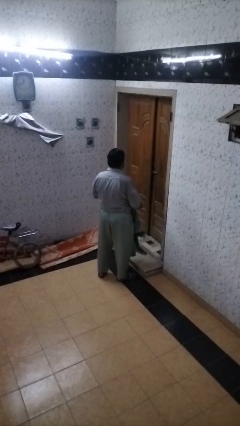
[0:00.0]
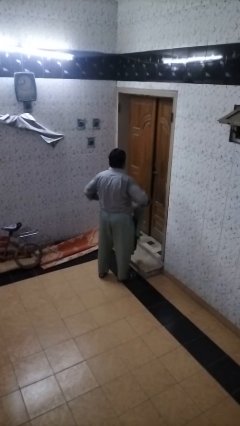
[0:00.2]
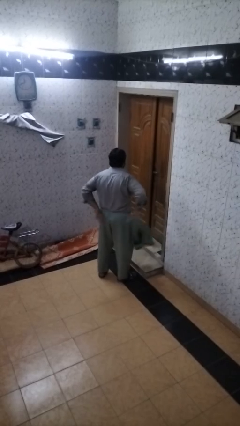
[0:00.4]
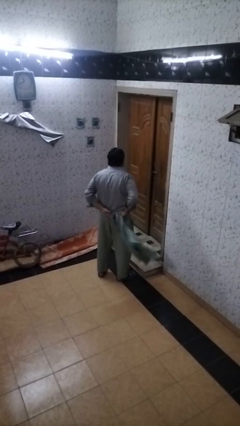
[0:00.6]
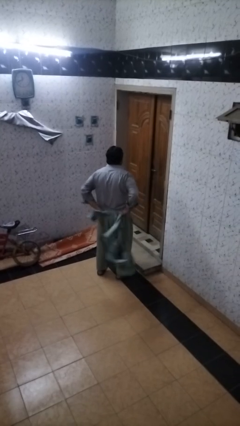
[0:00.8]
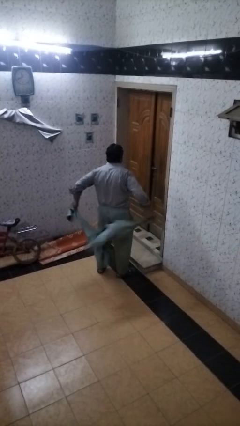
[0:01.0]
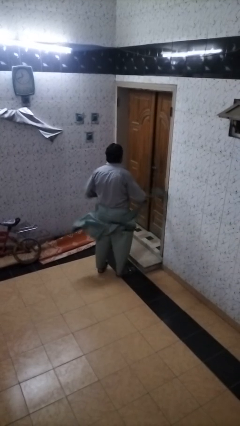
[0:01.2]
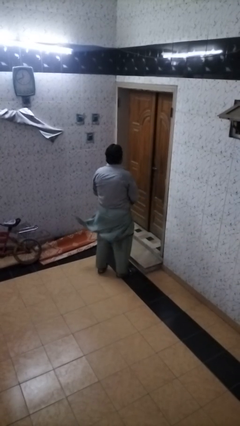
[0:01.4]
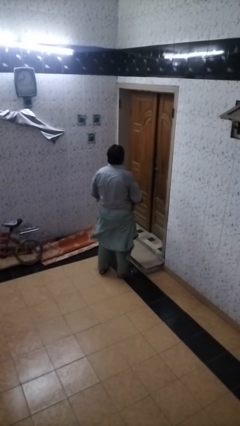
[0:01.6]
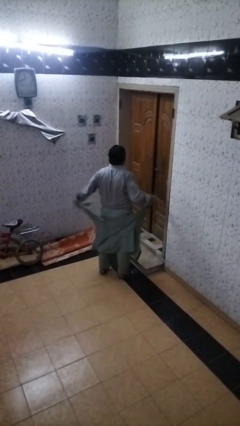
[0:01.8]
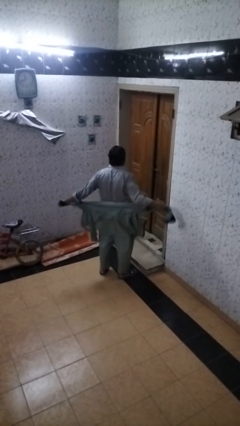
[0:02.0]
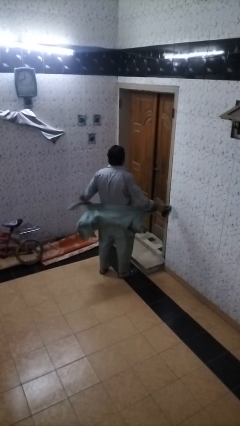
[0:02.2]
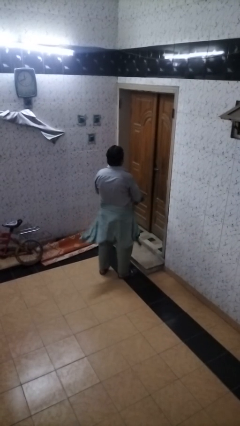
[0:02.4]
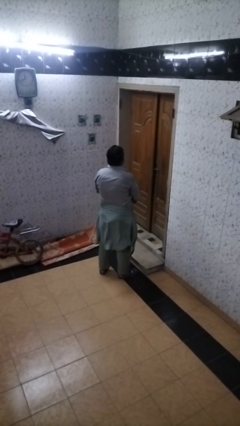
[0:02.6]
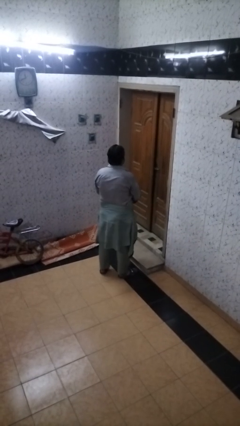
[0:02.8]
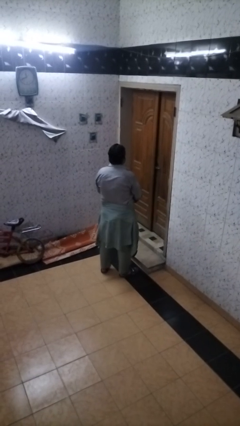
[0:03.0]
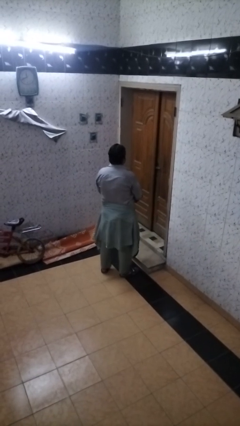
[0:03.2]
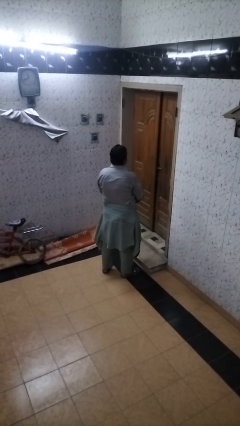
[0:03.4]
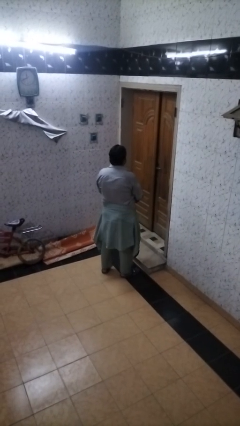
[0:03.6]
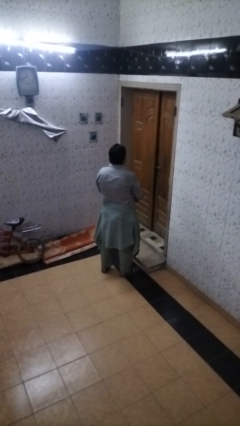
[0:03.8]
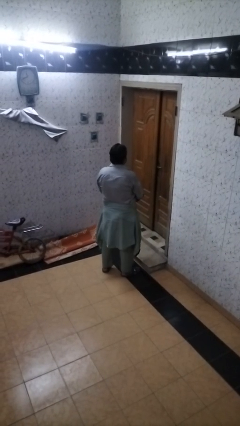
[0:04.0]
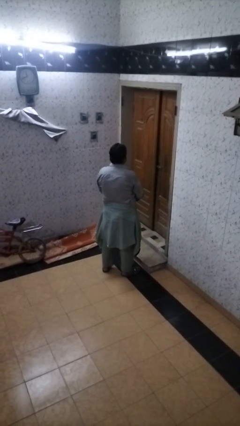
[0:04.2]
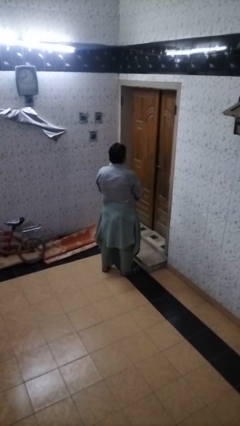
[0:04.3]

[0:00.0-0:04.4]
person ties jacket around waist

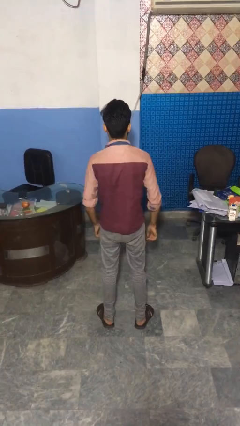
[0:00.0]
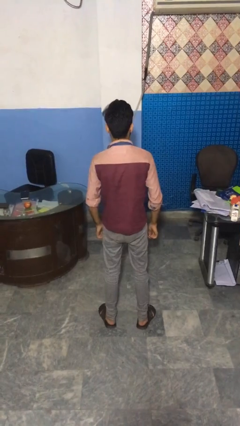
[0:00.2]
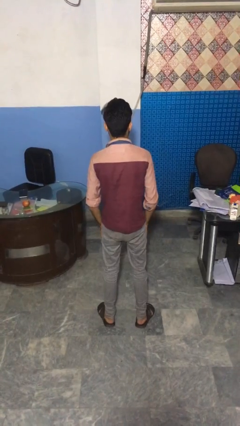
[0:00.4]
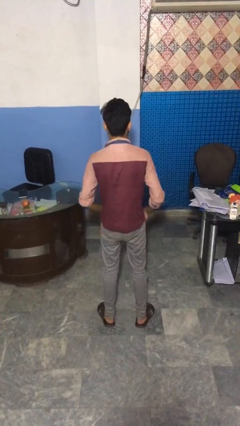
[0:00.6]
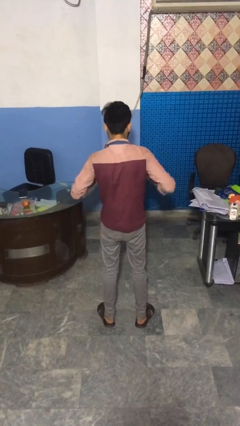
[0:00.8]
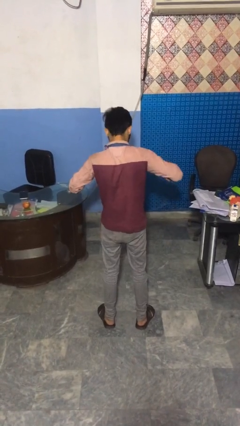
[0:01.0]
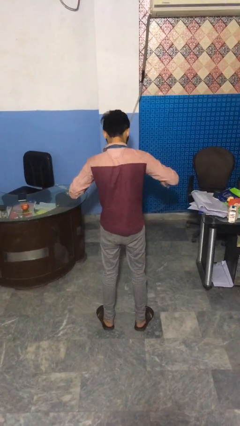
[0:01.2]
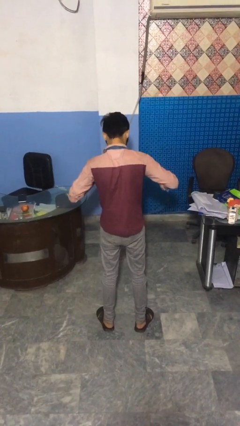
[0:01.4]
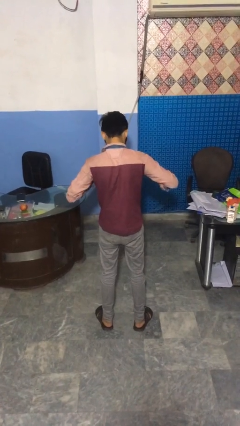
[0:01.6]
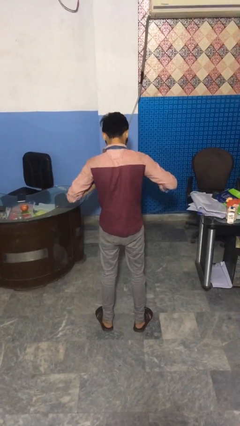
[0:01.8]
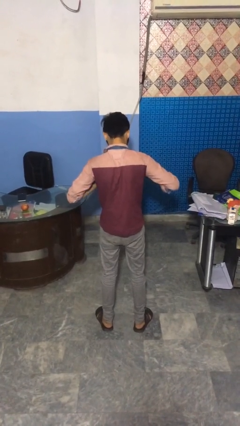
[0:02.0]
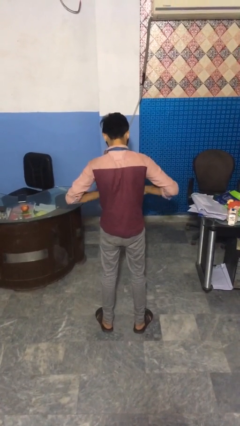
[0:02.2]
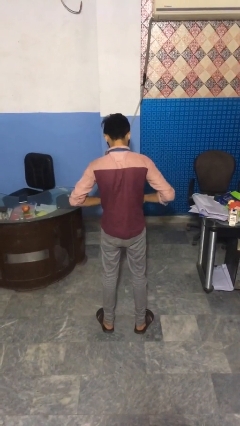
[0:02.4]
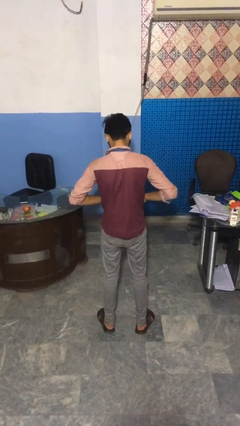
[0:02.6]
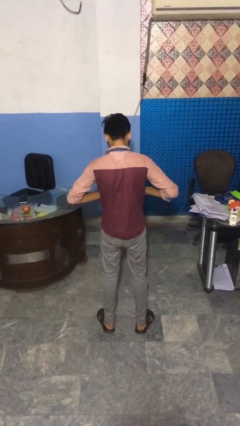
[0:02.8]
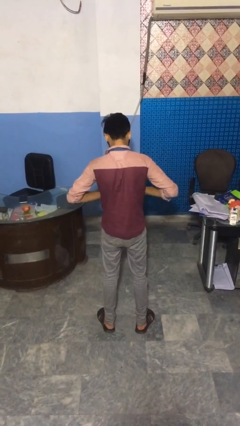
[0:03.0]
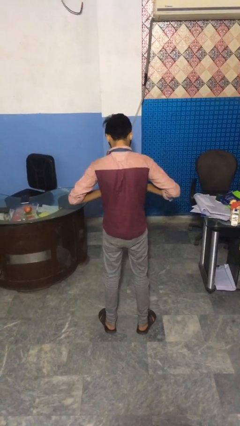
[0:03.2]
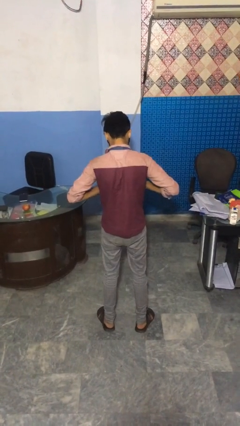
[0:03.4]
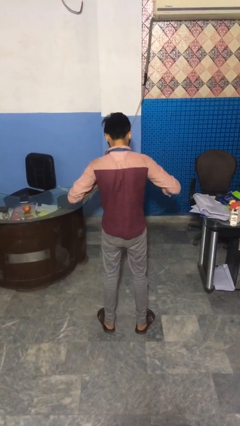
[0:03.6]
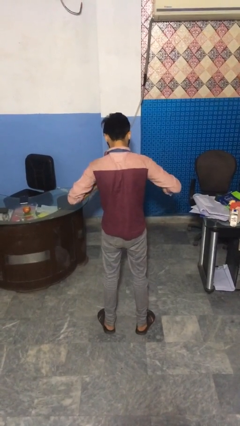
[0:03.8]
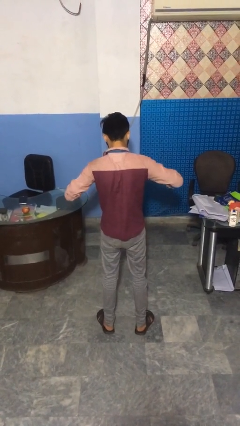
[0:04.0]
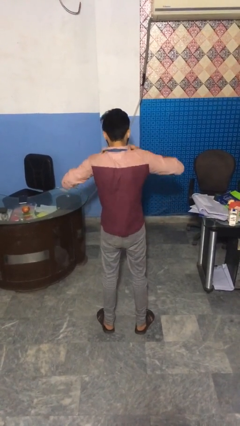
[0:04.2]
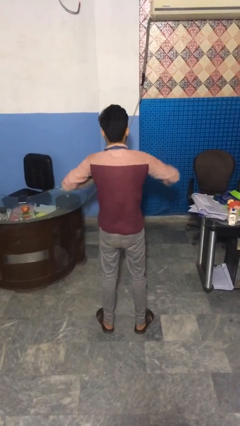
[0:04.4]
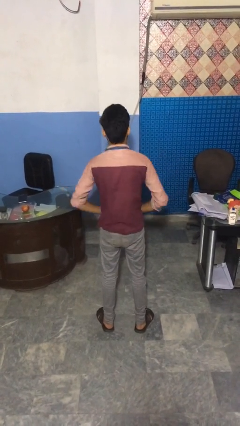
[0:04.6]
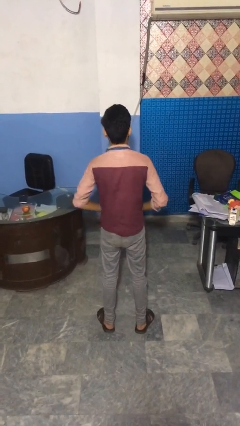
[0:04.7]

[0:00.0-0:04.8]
person buttons shirt

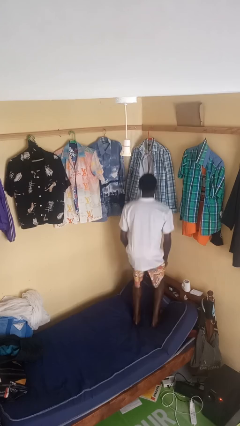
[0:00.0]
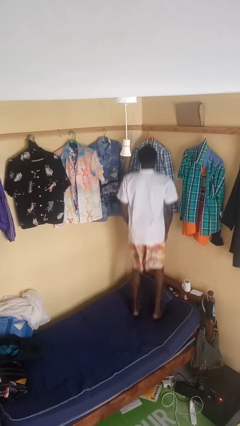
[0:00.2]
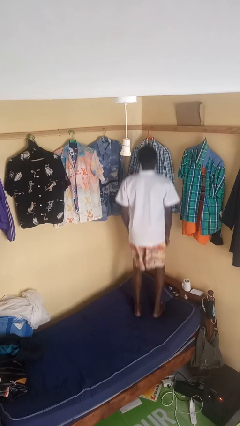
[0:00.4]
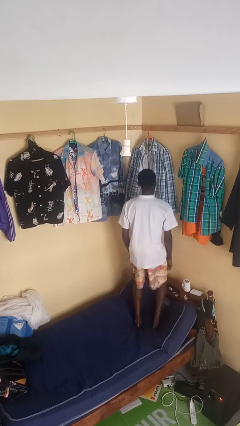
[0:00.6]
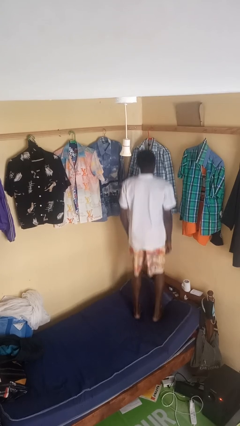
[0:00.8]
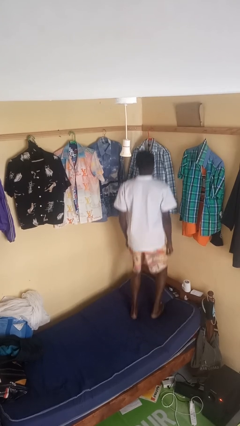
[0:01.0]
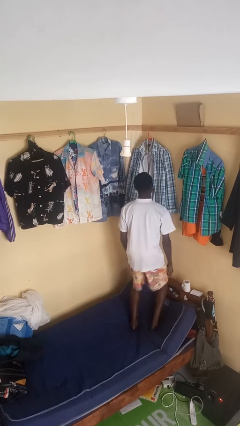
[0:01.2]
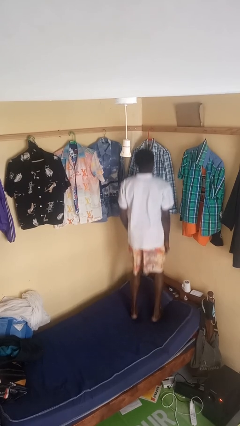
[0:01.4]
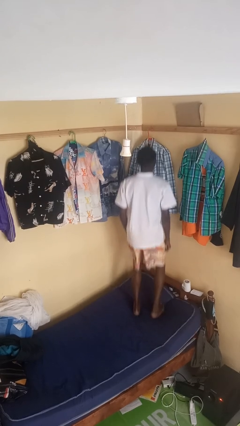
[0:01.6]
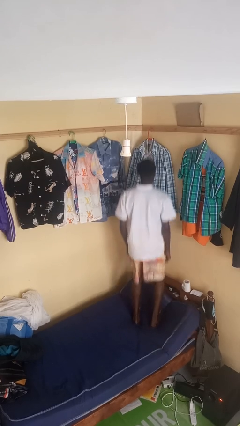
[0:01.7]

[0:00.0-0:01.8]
person jumps on bed

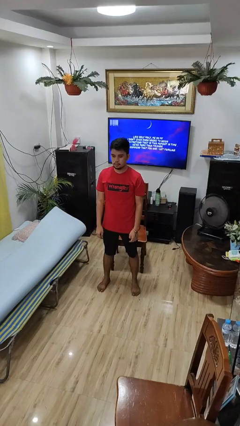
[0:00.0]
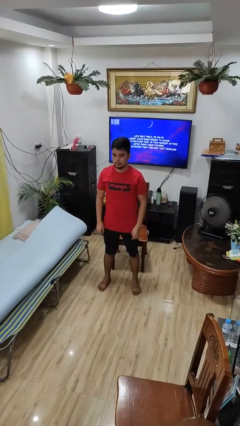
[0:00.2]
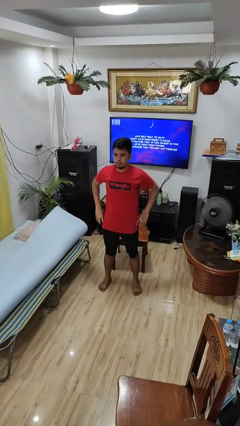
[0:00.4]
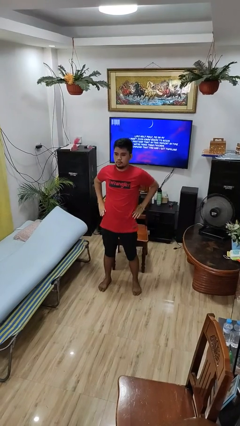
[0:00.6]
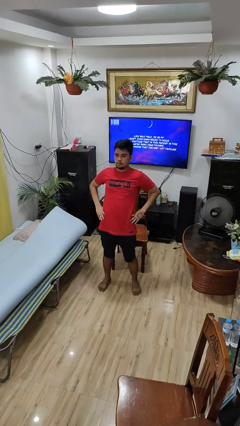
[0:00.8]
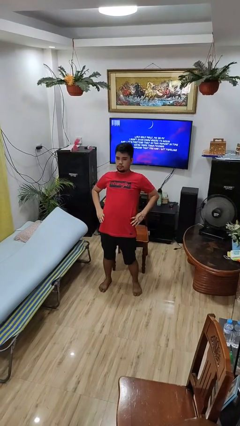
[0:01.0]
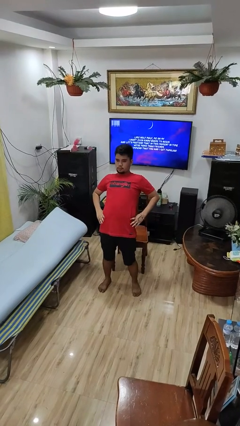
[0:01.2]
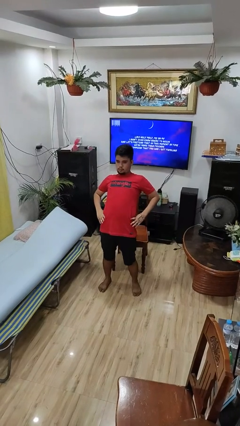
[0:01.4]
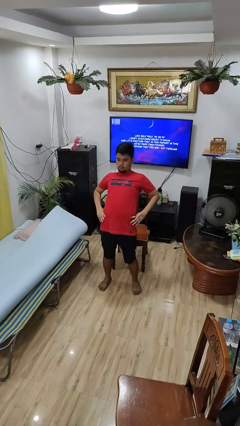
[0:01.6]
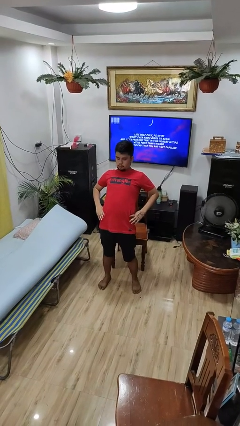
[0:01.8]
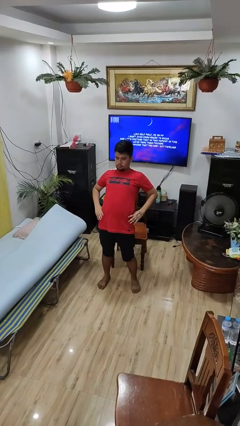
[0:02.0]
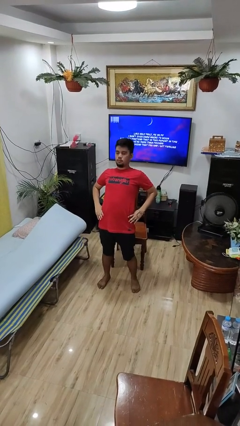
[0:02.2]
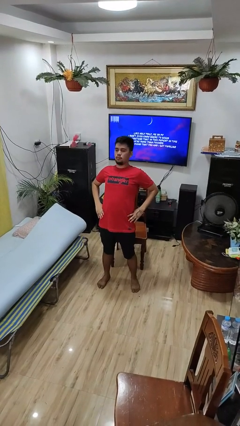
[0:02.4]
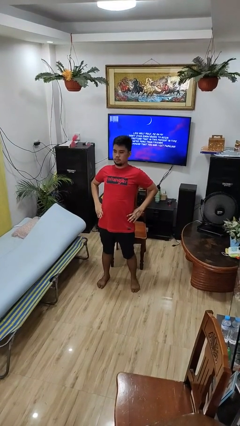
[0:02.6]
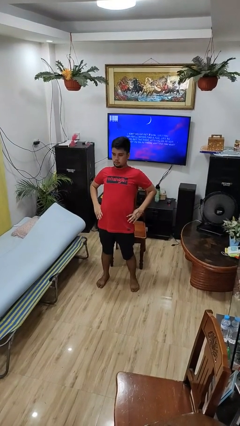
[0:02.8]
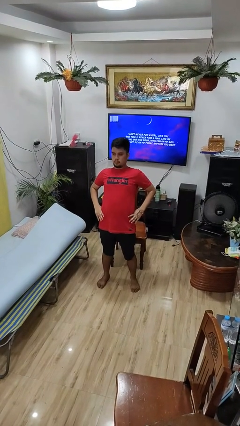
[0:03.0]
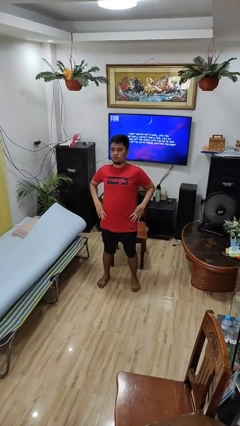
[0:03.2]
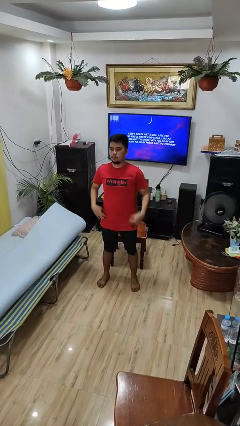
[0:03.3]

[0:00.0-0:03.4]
person stretches back

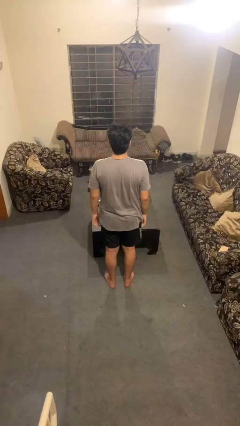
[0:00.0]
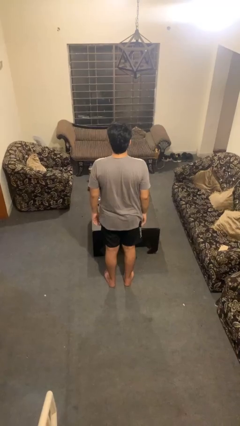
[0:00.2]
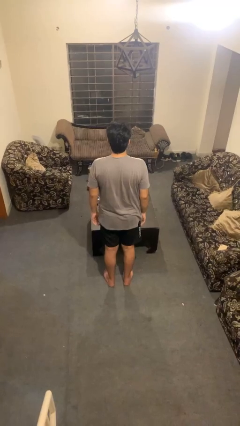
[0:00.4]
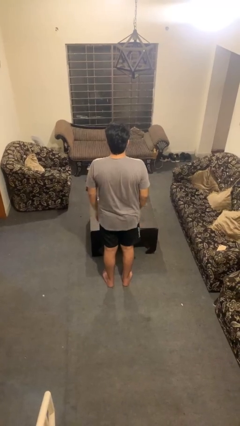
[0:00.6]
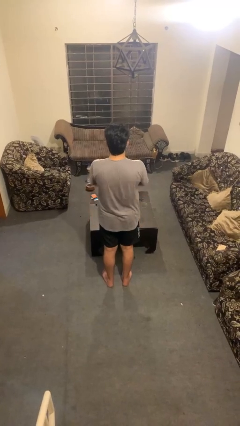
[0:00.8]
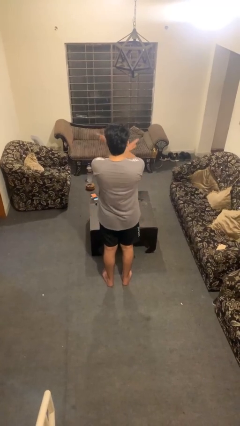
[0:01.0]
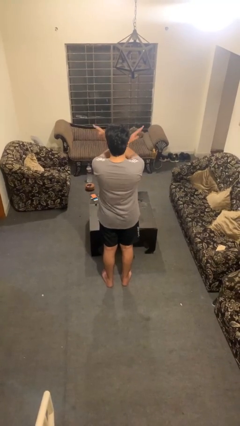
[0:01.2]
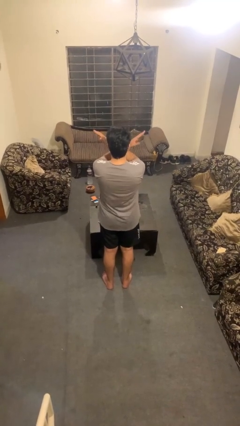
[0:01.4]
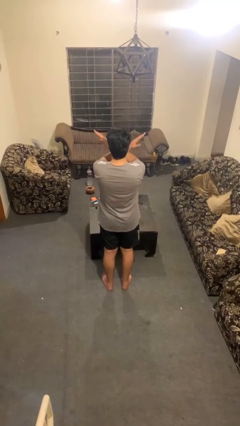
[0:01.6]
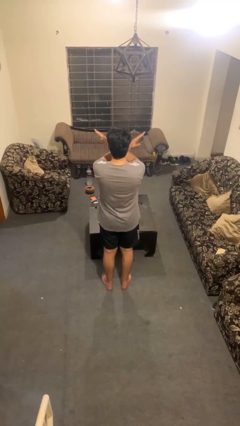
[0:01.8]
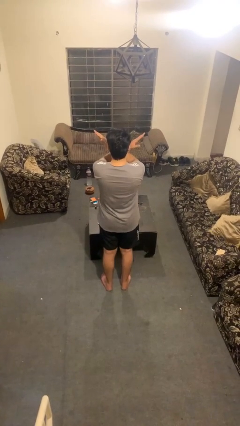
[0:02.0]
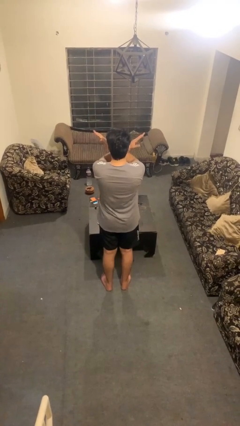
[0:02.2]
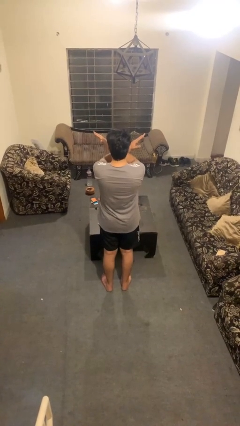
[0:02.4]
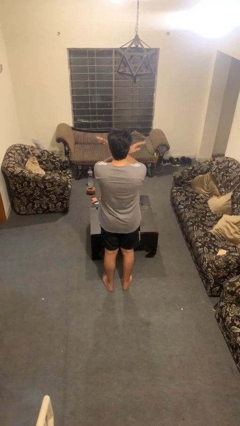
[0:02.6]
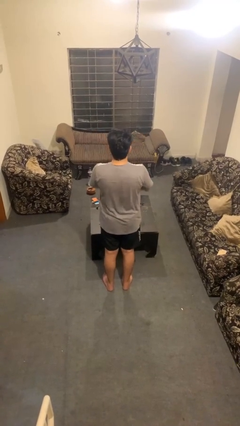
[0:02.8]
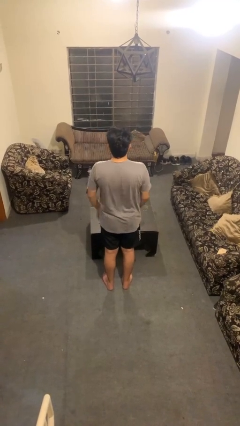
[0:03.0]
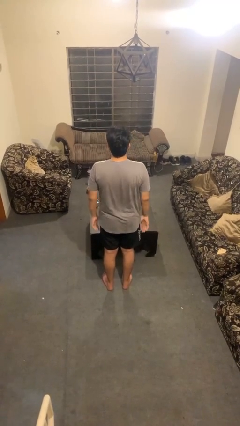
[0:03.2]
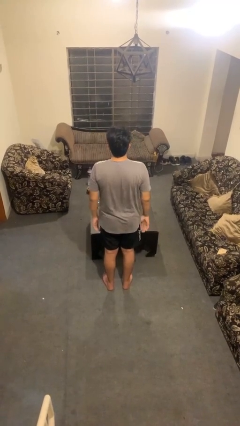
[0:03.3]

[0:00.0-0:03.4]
person gestures arms x
